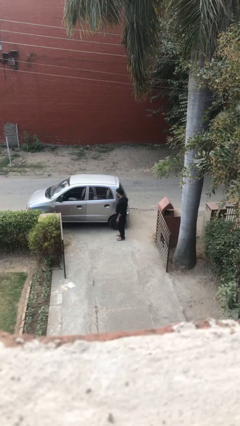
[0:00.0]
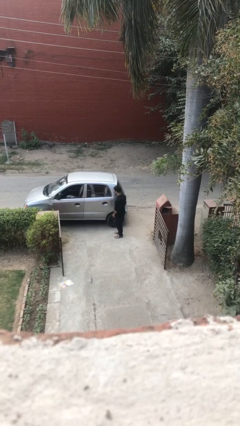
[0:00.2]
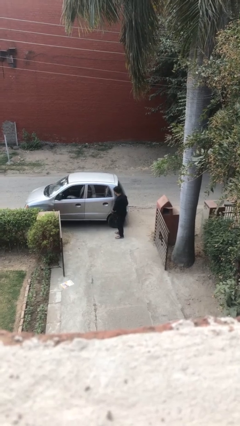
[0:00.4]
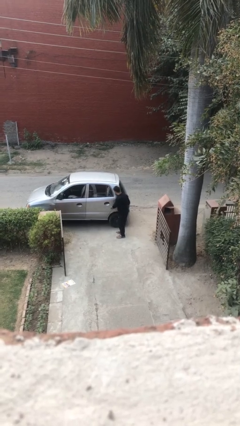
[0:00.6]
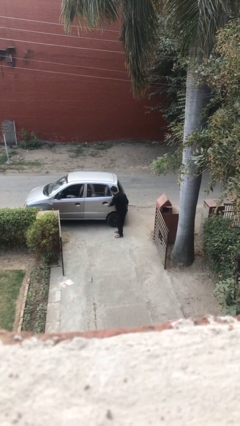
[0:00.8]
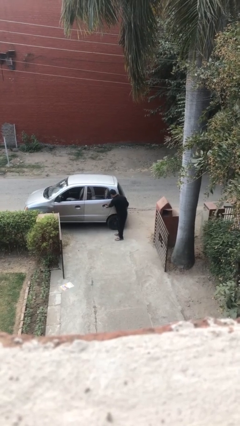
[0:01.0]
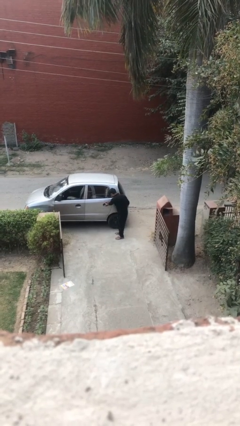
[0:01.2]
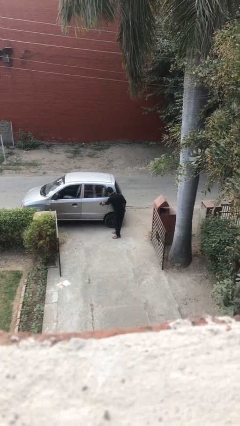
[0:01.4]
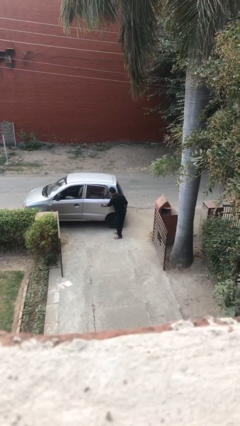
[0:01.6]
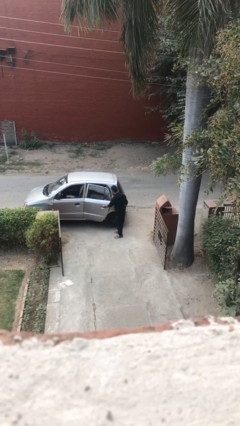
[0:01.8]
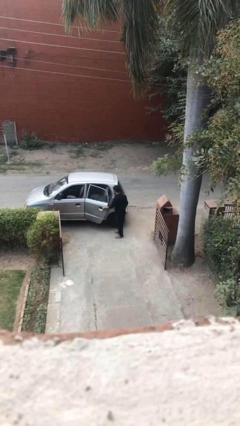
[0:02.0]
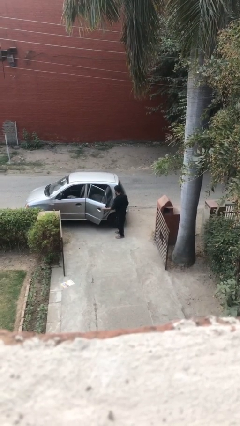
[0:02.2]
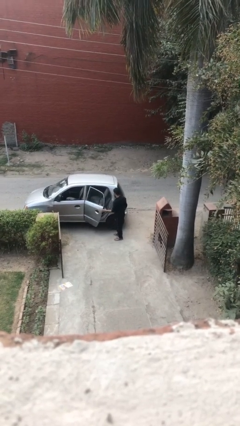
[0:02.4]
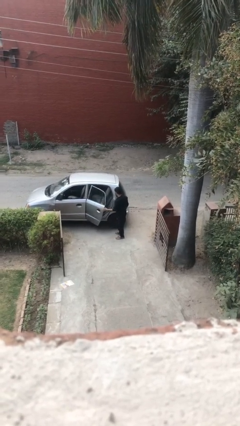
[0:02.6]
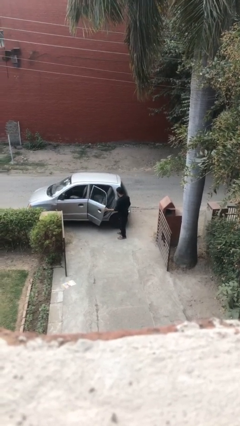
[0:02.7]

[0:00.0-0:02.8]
person opens car door

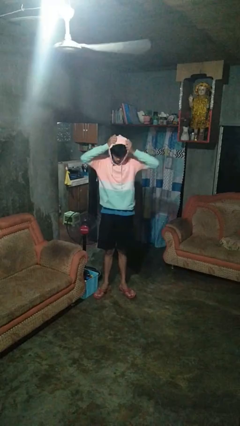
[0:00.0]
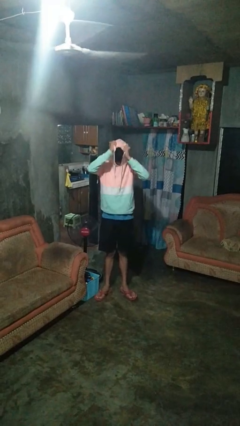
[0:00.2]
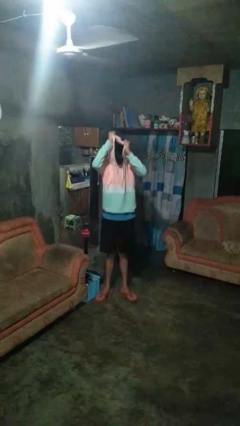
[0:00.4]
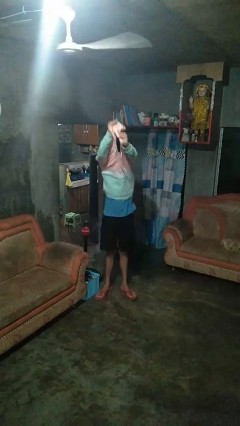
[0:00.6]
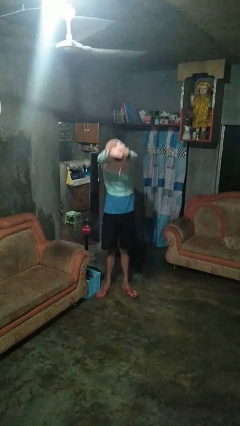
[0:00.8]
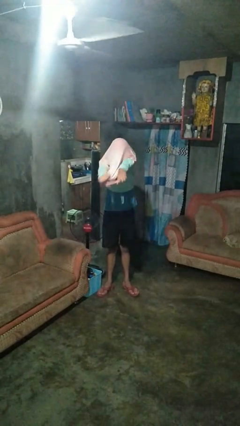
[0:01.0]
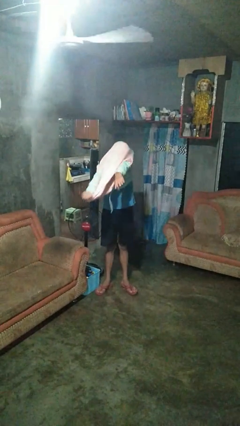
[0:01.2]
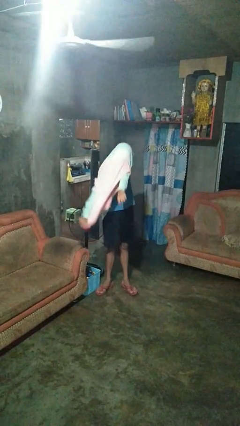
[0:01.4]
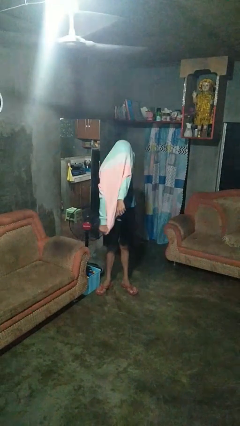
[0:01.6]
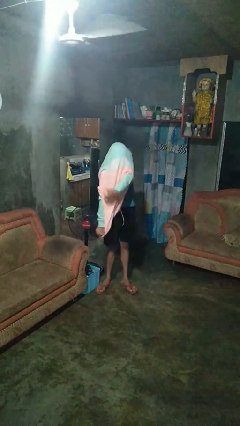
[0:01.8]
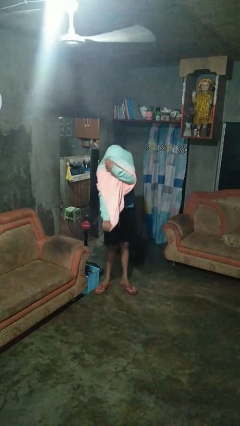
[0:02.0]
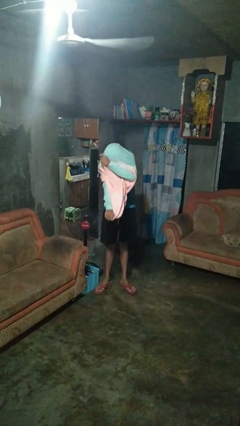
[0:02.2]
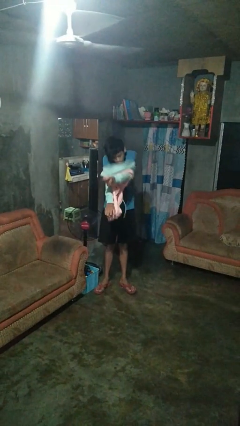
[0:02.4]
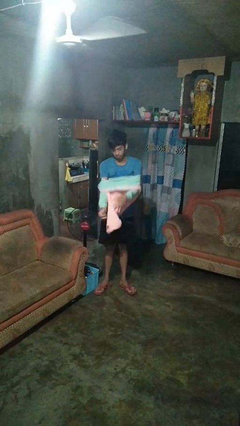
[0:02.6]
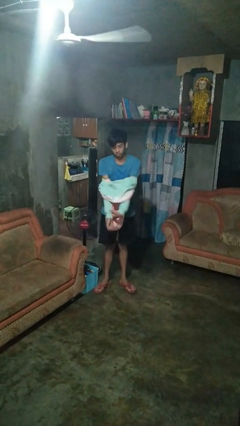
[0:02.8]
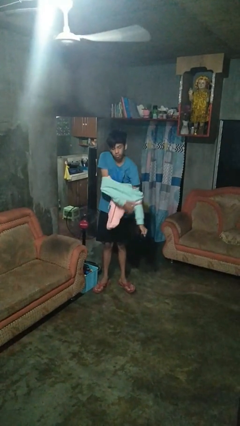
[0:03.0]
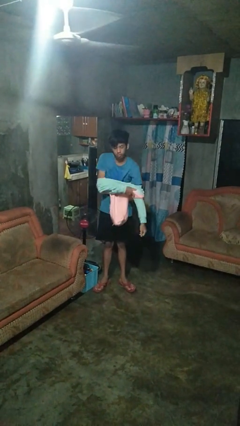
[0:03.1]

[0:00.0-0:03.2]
person takes off hoodie

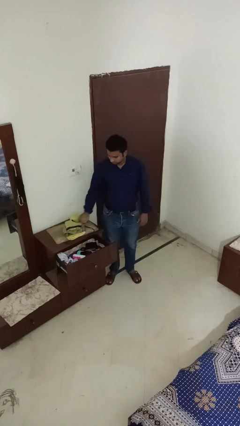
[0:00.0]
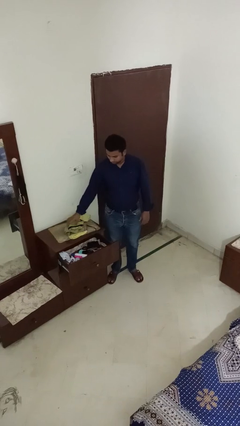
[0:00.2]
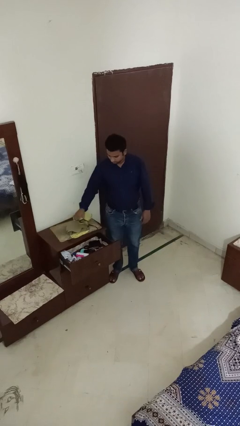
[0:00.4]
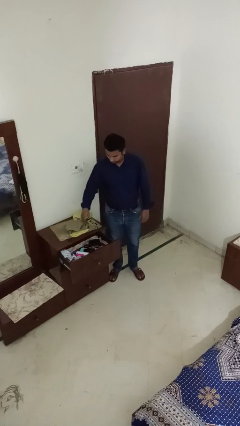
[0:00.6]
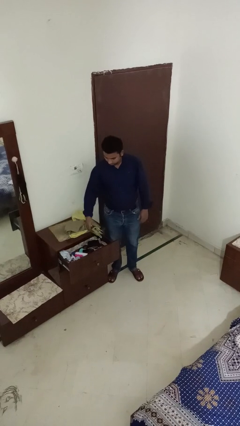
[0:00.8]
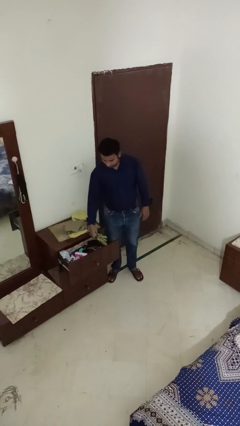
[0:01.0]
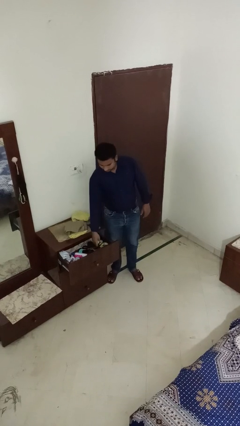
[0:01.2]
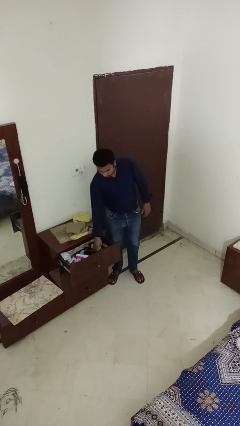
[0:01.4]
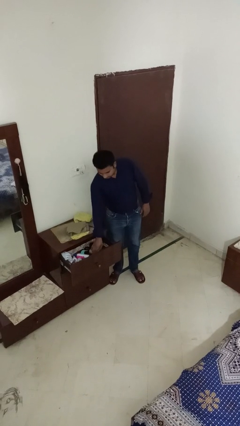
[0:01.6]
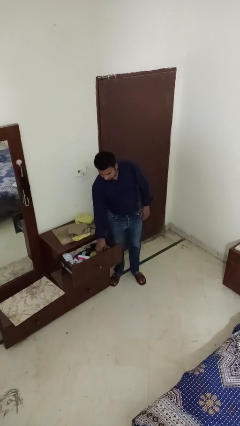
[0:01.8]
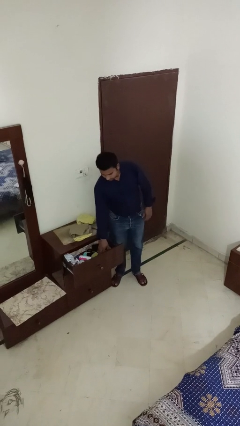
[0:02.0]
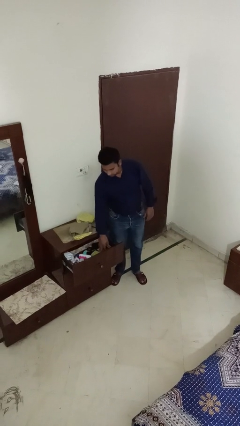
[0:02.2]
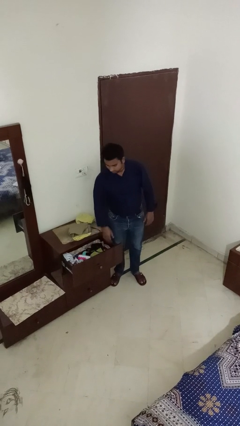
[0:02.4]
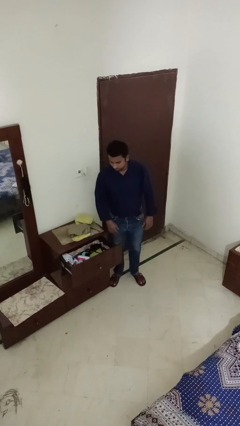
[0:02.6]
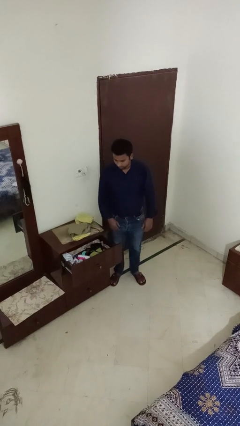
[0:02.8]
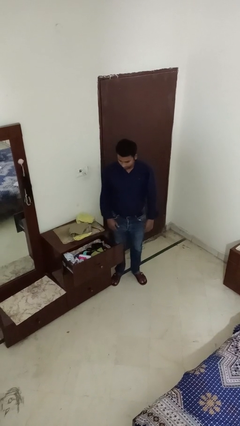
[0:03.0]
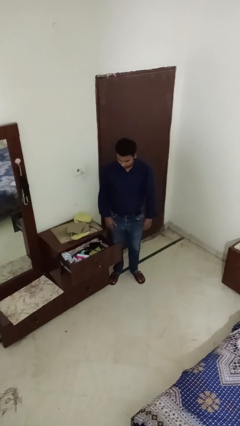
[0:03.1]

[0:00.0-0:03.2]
person puts clothes into dresser

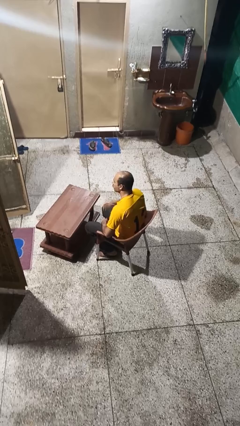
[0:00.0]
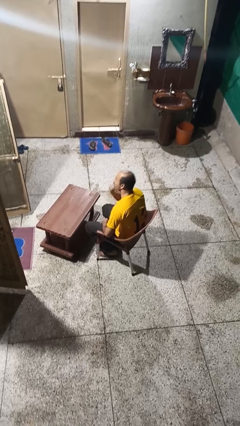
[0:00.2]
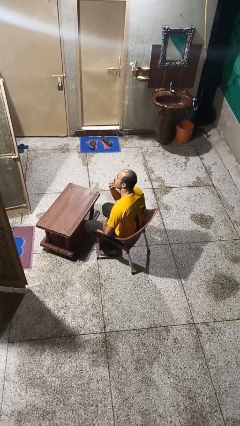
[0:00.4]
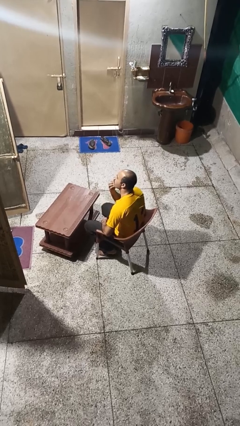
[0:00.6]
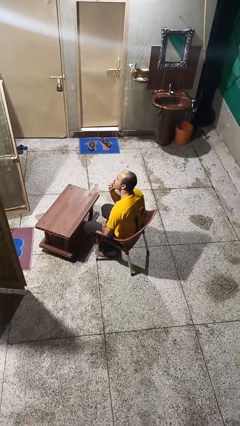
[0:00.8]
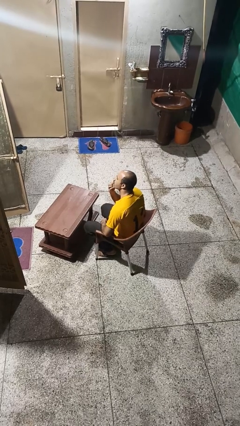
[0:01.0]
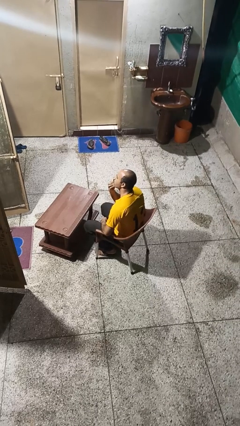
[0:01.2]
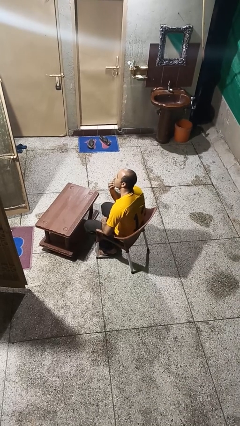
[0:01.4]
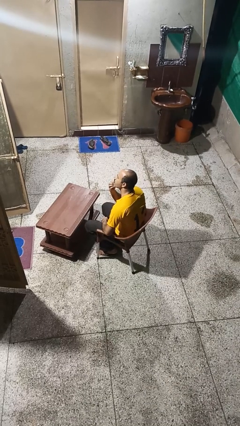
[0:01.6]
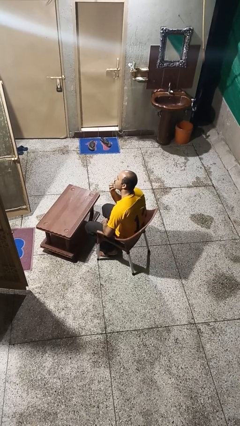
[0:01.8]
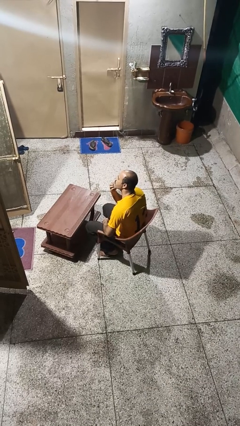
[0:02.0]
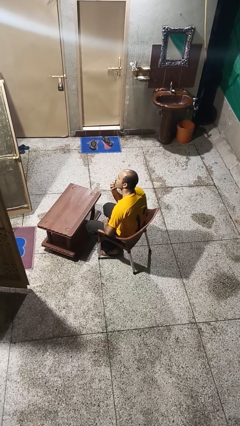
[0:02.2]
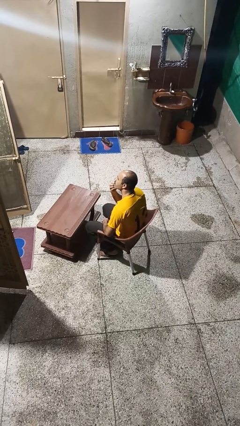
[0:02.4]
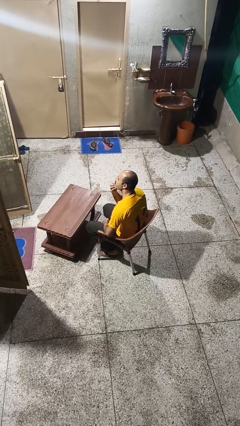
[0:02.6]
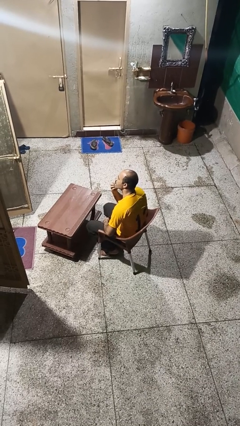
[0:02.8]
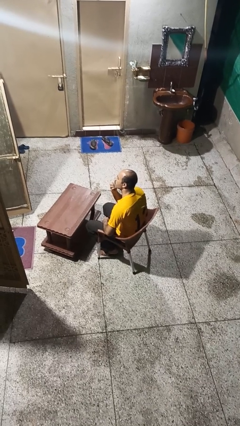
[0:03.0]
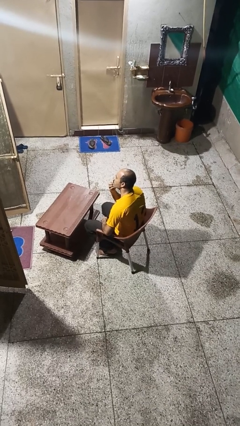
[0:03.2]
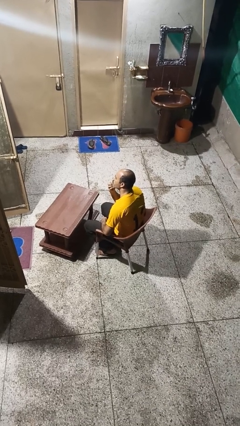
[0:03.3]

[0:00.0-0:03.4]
person strokes chin

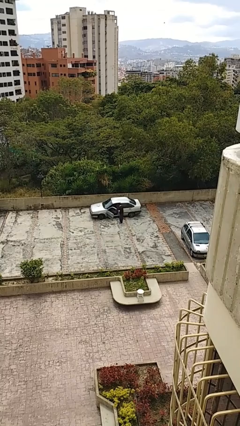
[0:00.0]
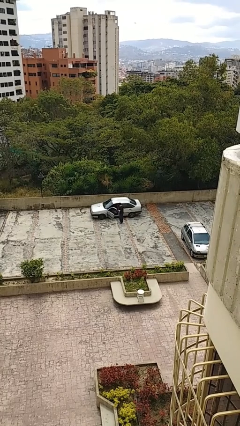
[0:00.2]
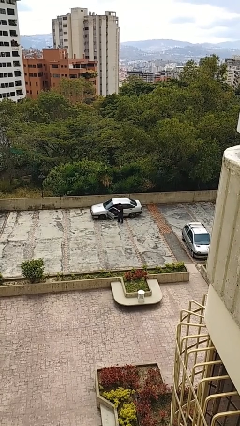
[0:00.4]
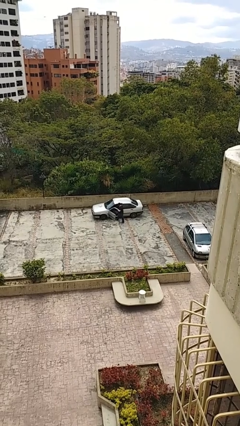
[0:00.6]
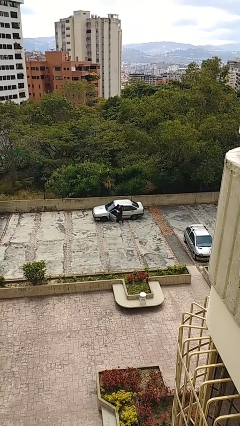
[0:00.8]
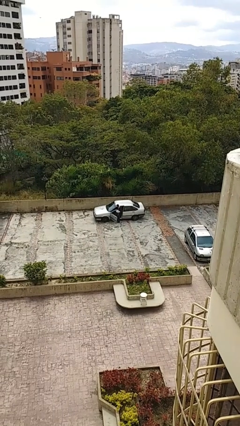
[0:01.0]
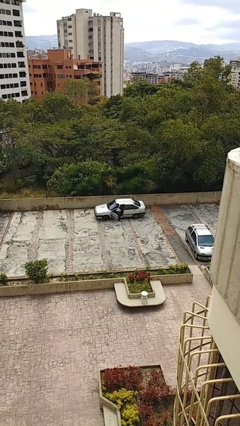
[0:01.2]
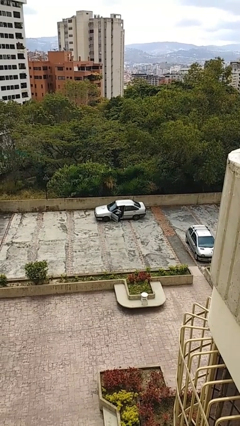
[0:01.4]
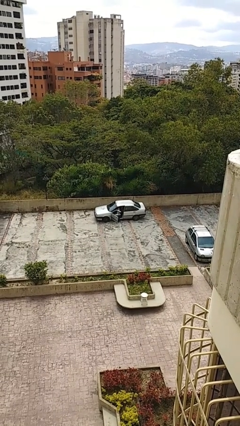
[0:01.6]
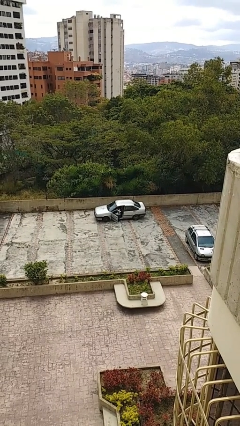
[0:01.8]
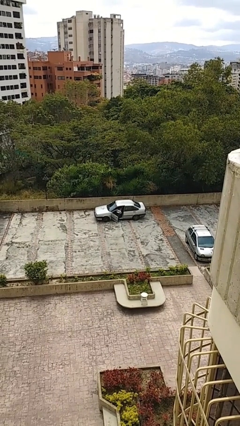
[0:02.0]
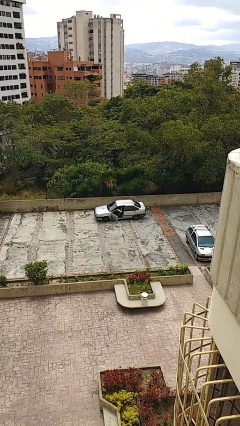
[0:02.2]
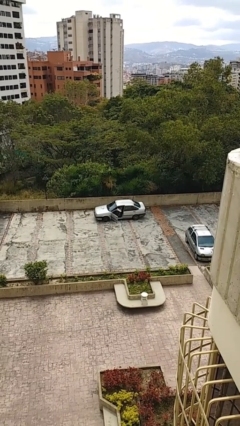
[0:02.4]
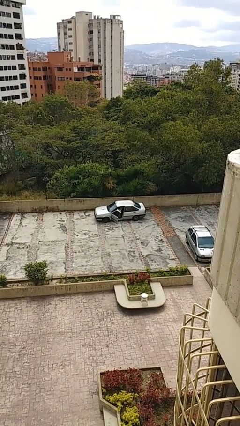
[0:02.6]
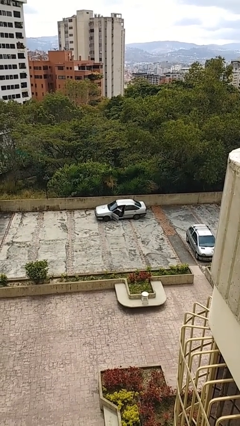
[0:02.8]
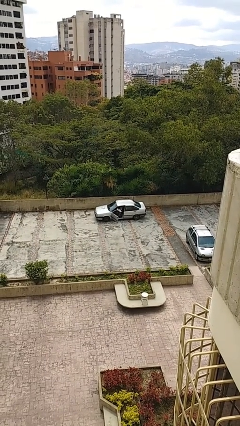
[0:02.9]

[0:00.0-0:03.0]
person enters car

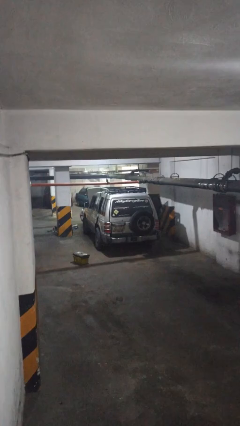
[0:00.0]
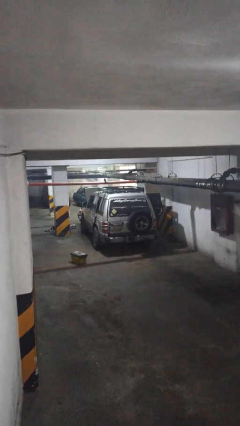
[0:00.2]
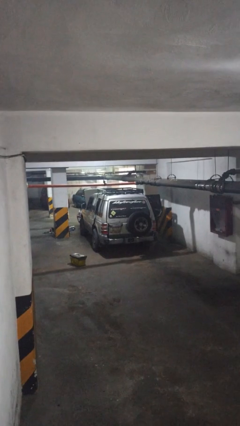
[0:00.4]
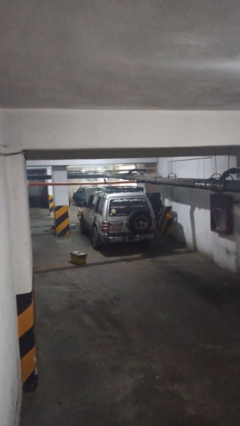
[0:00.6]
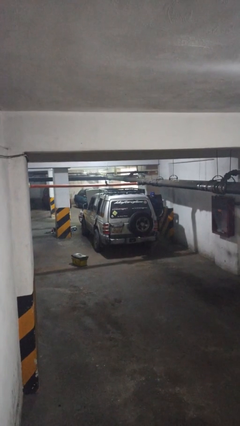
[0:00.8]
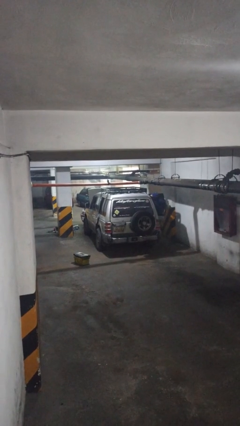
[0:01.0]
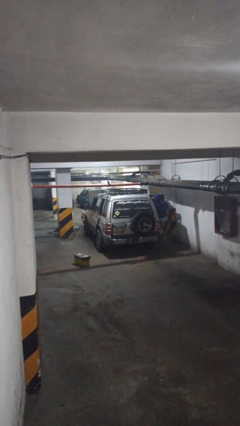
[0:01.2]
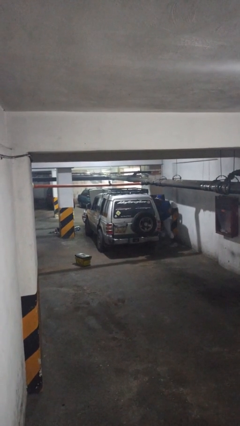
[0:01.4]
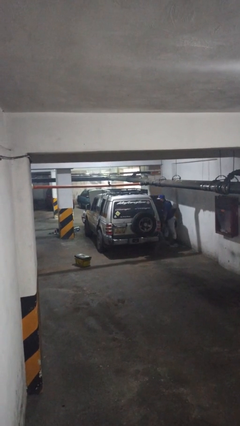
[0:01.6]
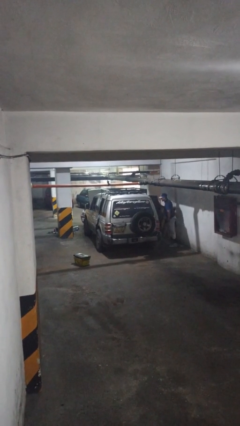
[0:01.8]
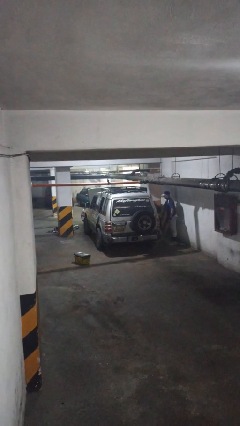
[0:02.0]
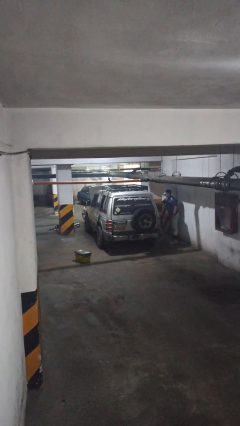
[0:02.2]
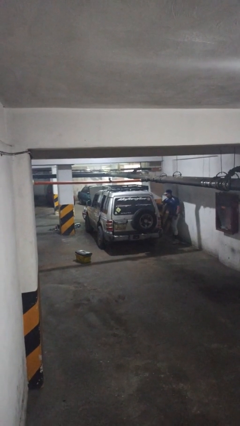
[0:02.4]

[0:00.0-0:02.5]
car drops off person
